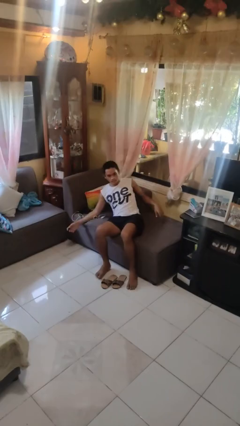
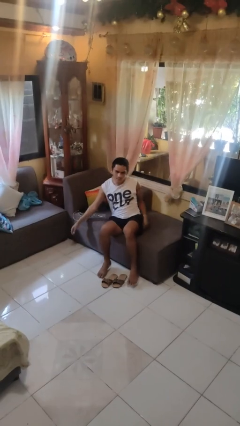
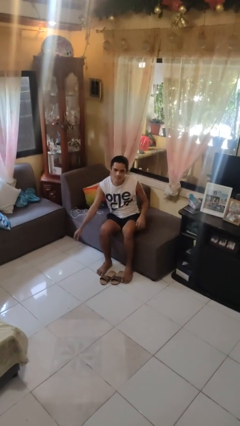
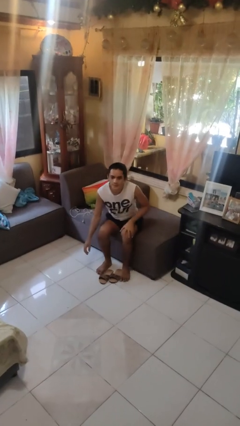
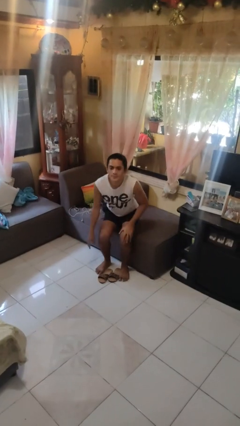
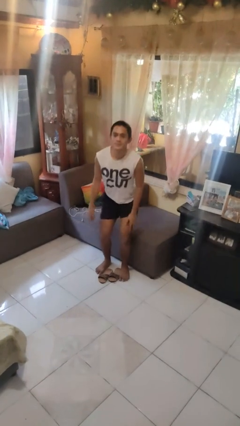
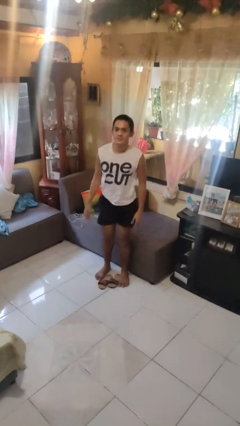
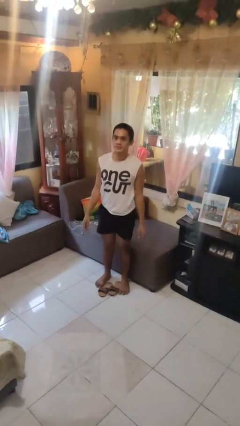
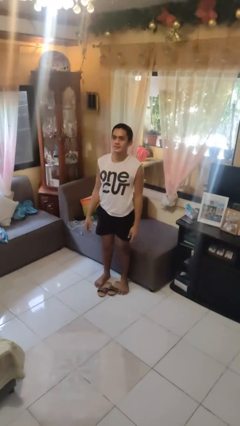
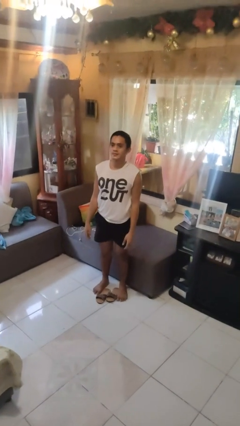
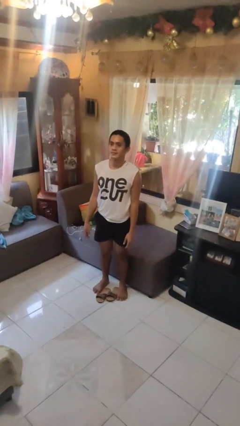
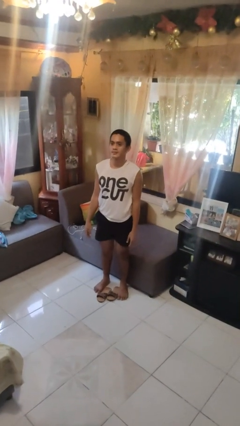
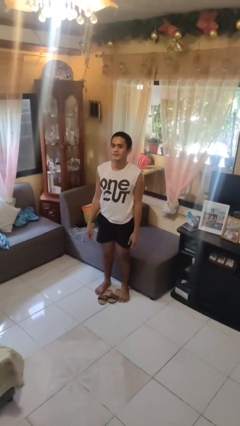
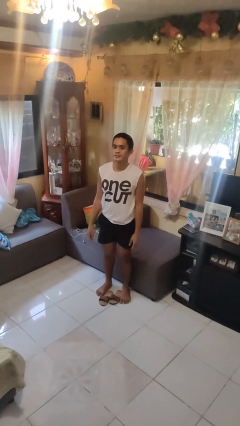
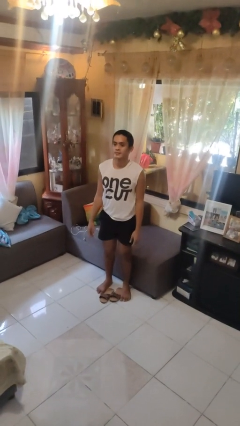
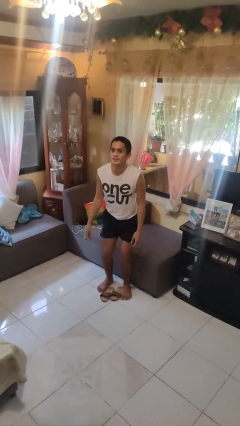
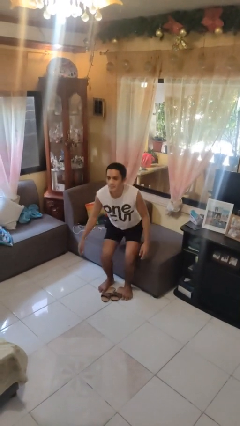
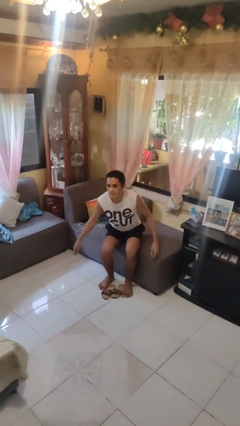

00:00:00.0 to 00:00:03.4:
person stands up

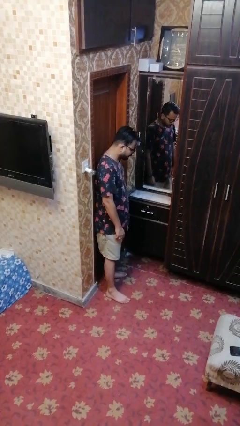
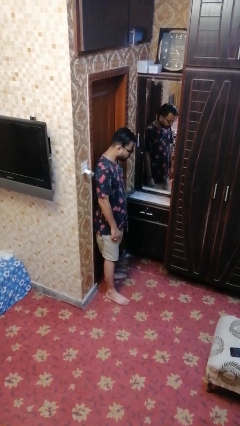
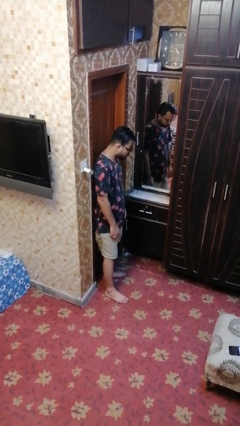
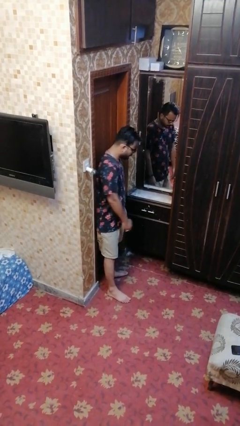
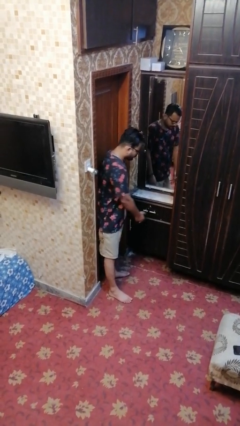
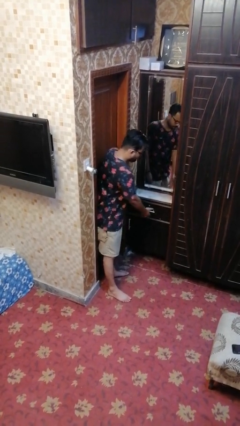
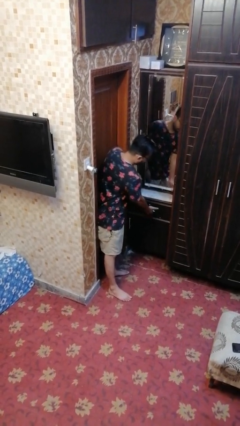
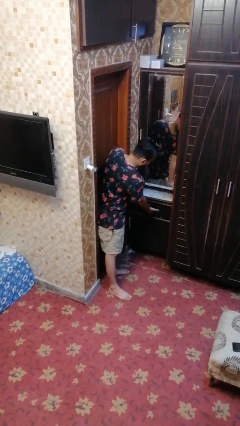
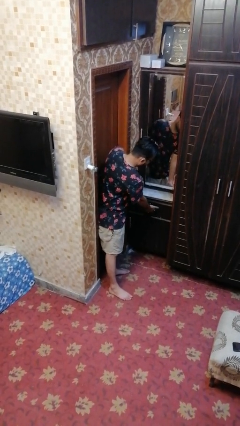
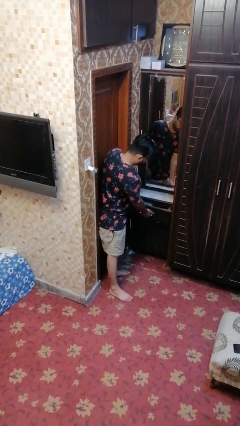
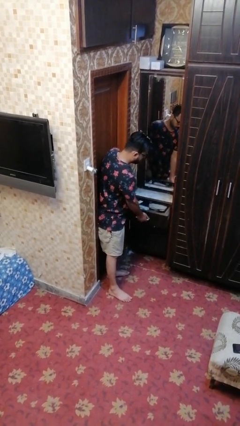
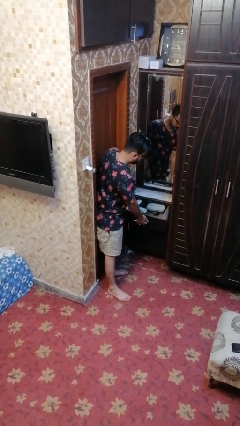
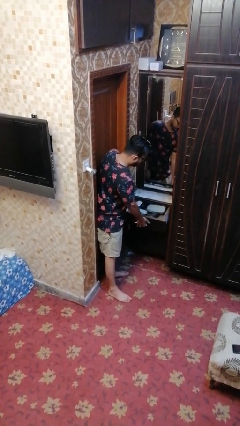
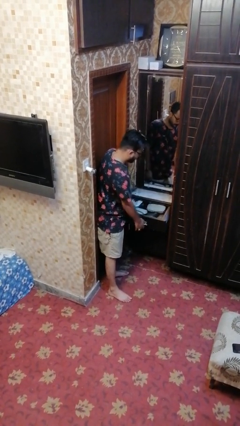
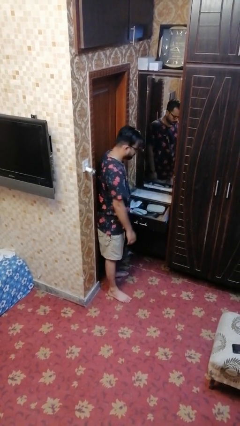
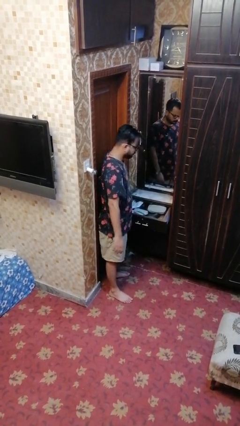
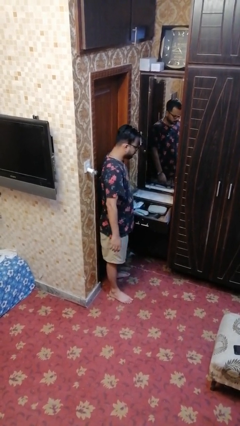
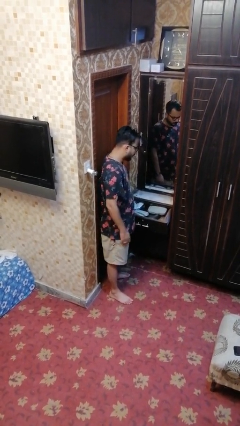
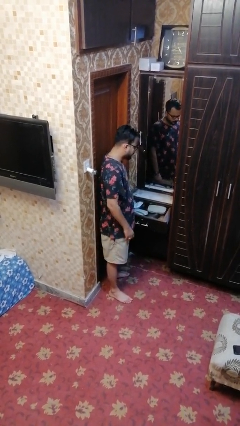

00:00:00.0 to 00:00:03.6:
person opens dresser drawer

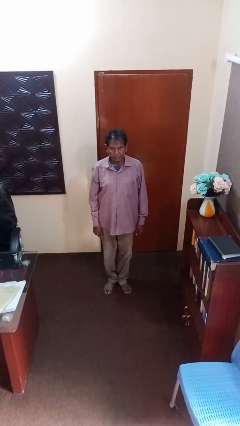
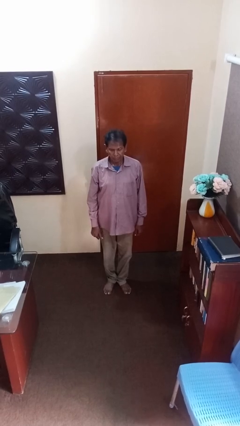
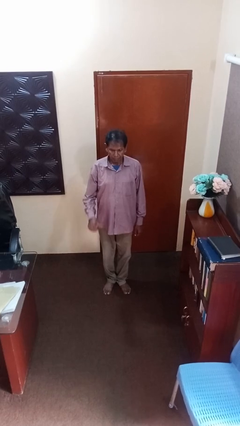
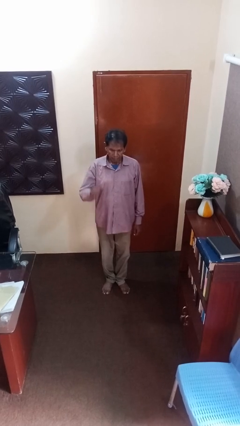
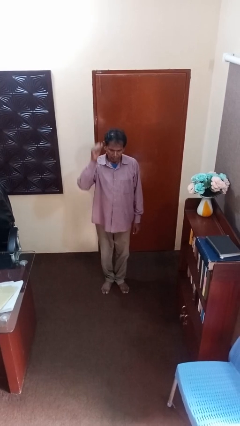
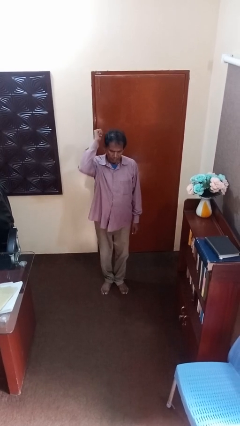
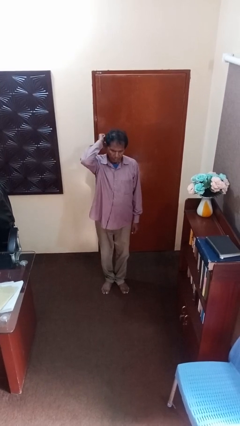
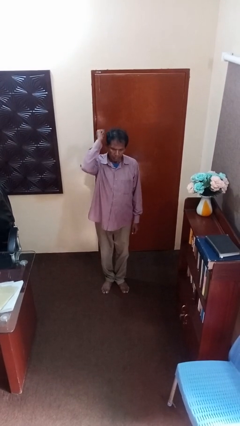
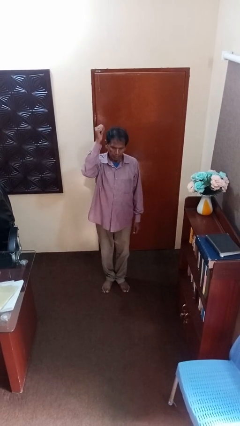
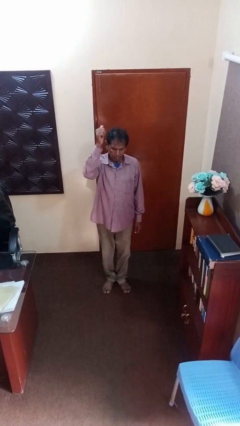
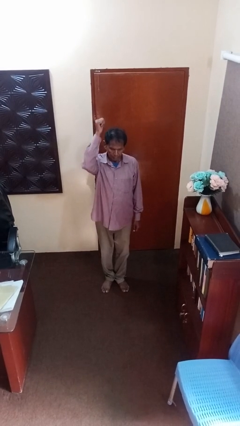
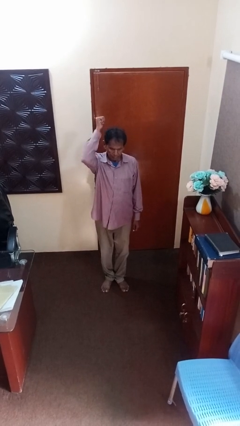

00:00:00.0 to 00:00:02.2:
person gestures behind me

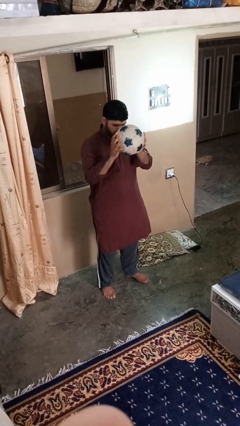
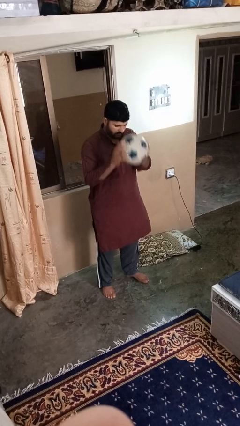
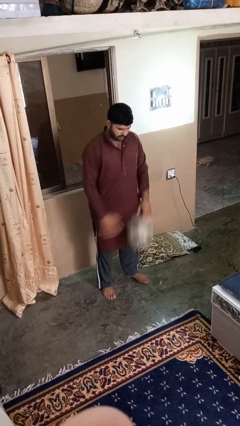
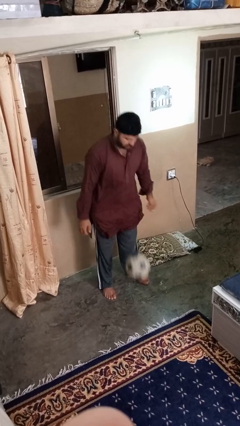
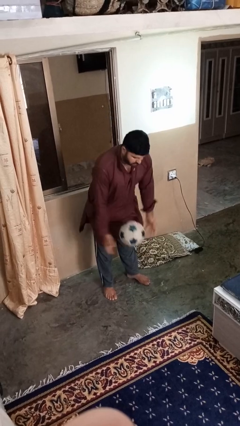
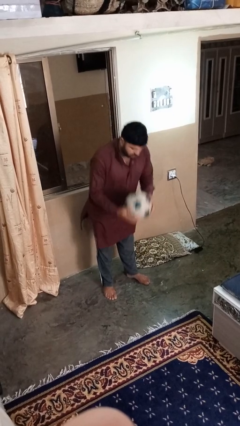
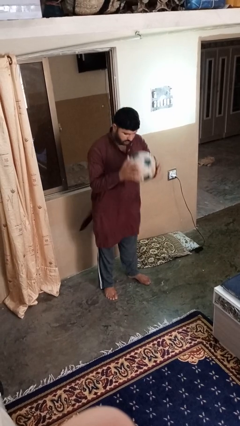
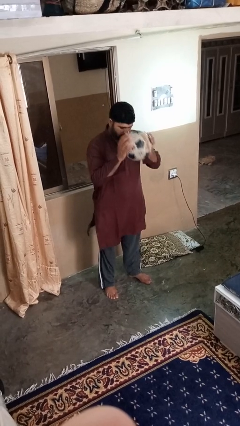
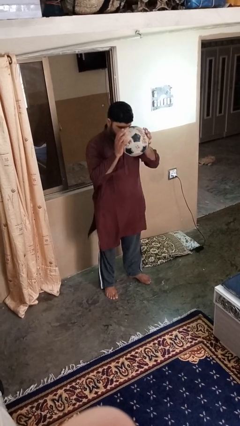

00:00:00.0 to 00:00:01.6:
person bounces ball on floor

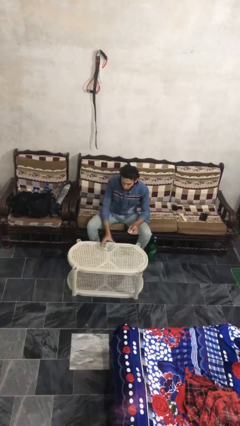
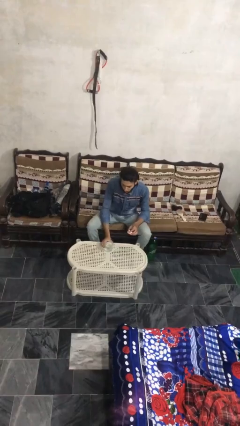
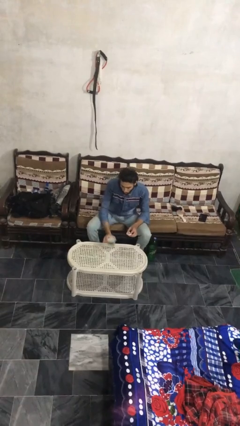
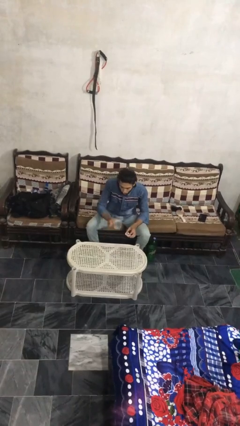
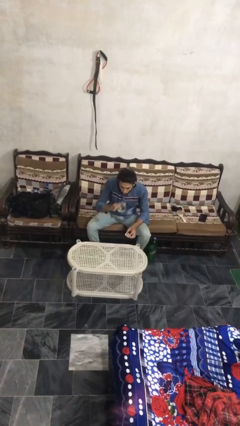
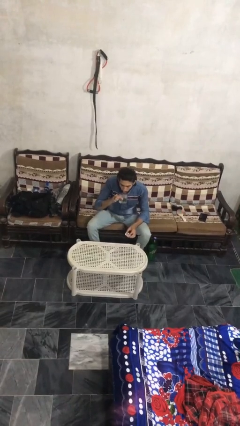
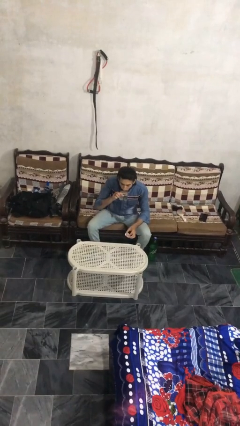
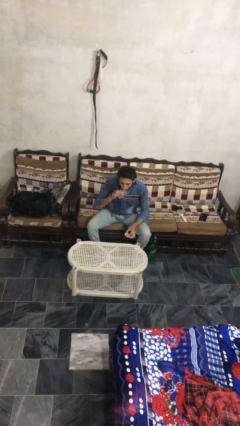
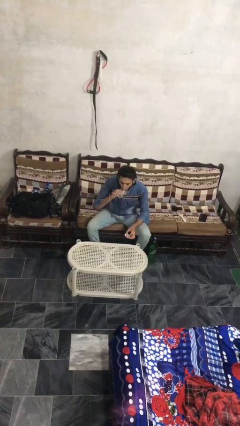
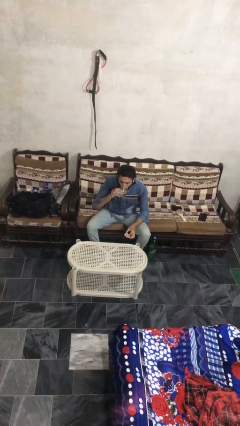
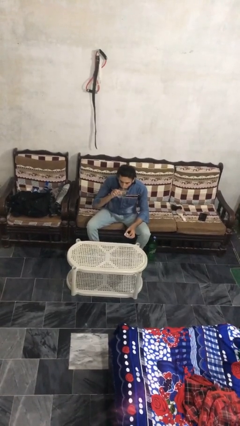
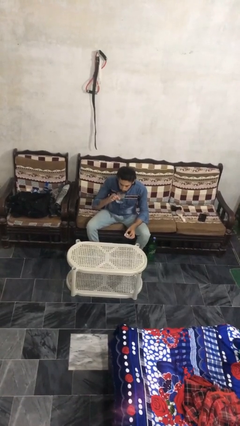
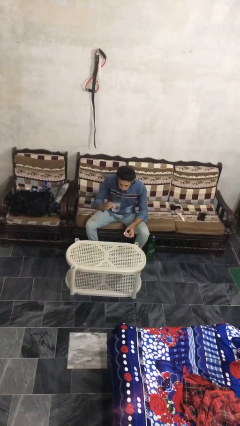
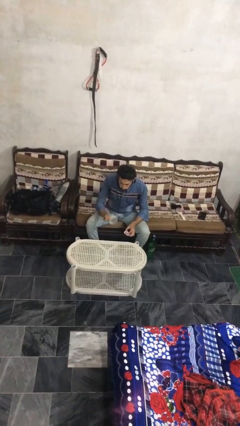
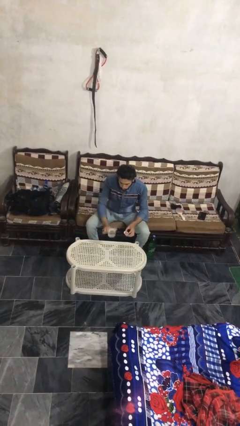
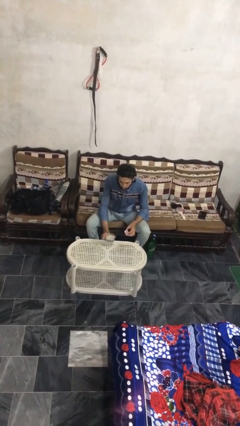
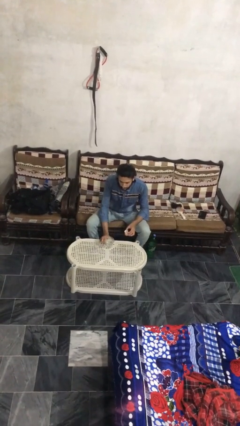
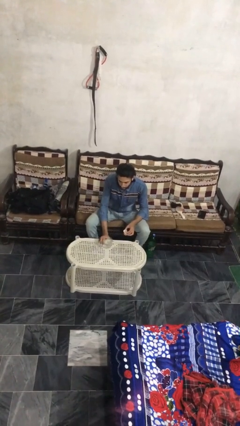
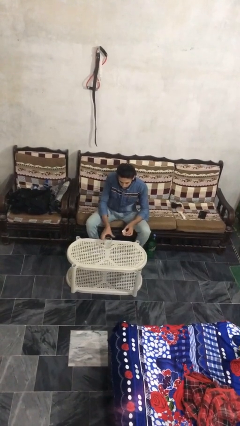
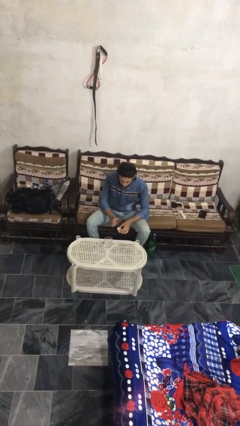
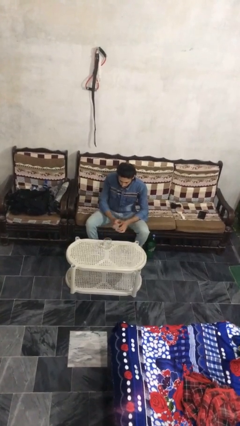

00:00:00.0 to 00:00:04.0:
person drinks from cup

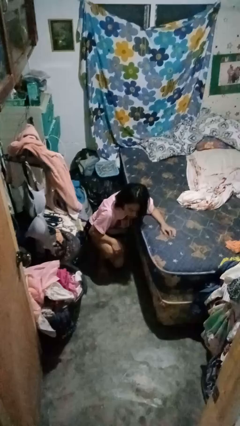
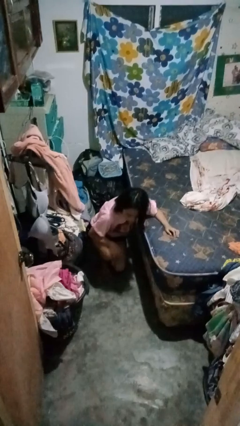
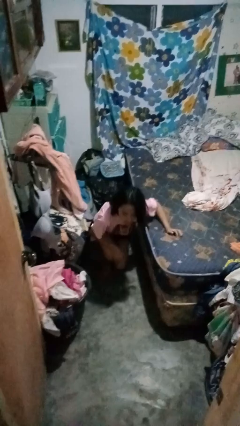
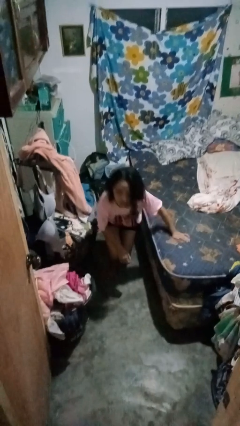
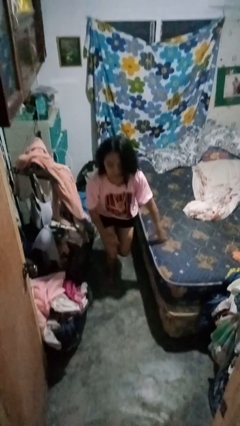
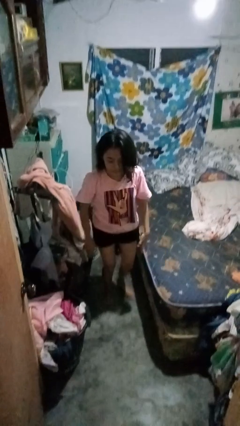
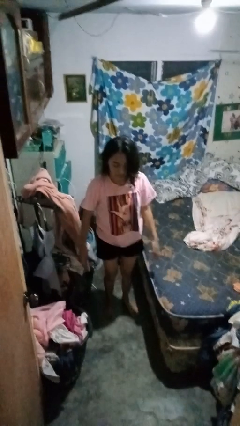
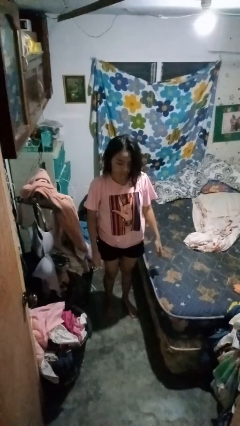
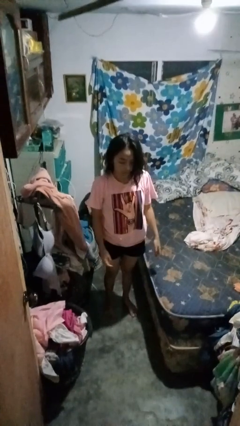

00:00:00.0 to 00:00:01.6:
person stands up from floor

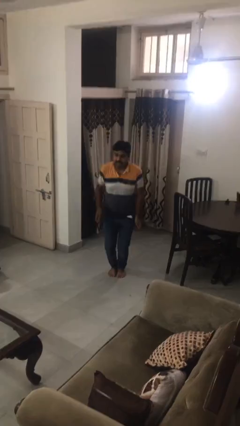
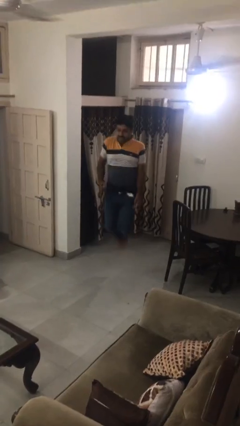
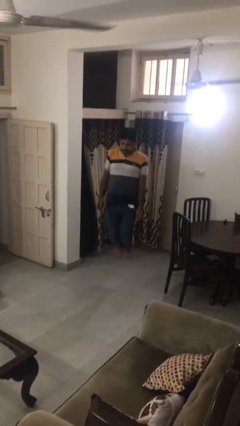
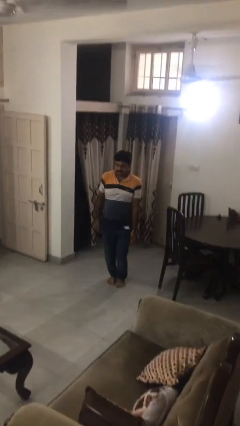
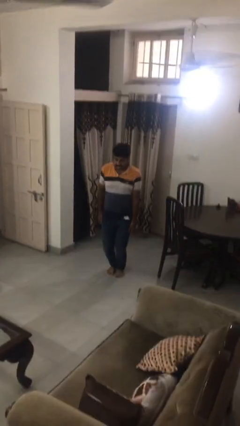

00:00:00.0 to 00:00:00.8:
person jumps
